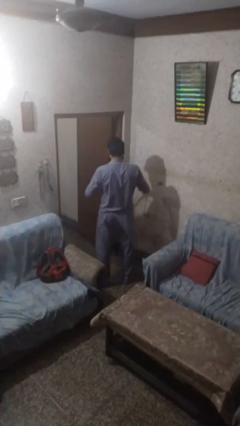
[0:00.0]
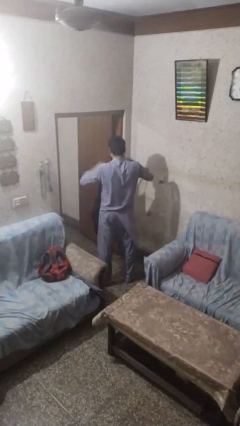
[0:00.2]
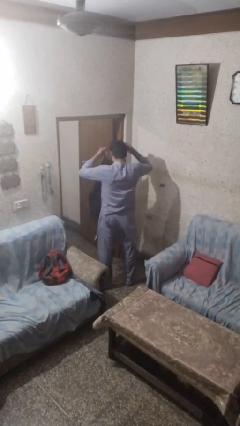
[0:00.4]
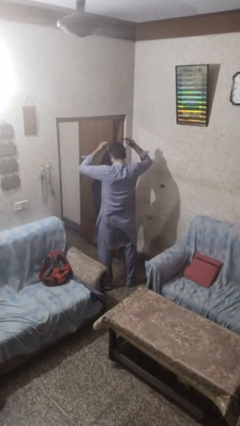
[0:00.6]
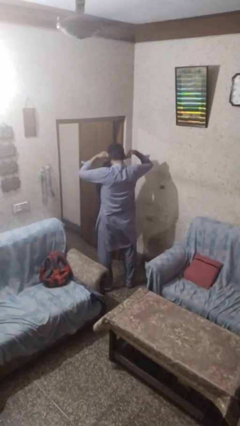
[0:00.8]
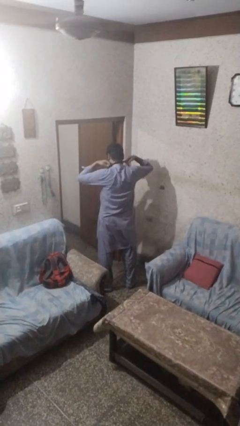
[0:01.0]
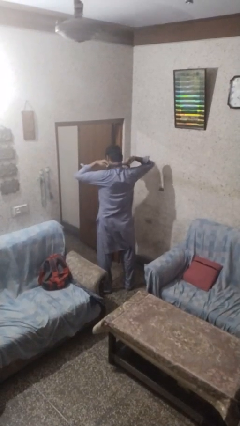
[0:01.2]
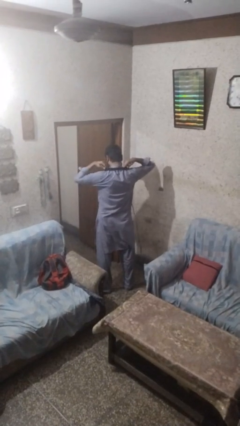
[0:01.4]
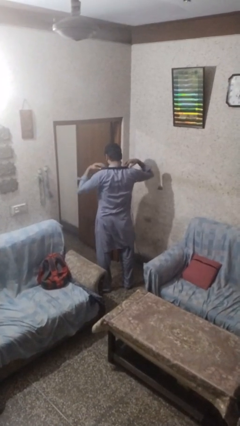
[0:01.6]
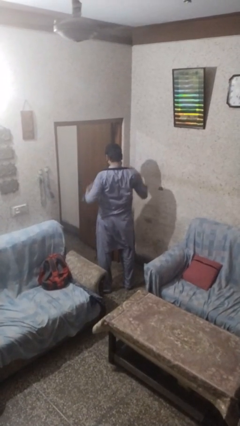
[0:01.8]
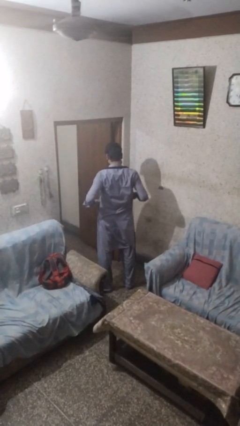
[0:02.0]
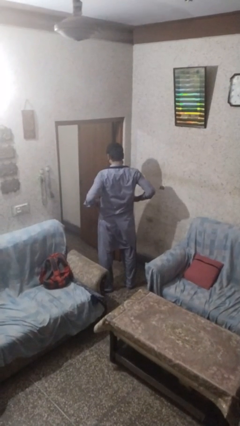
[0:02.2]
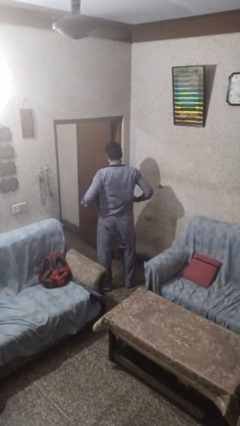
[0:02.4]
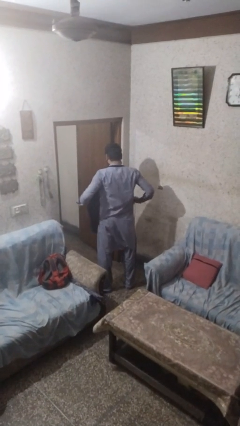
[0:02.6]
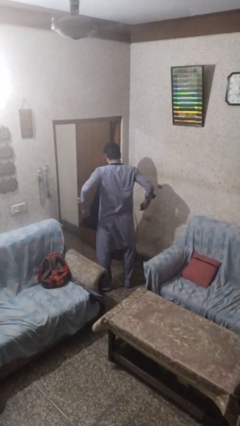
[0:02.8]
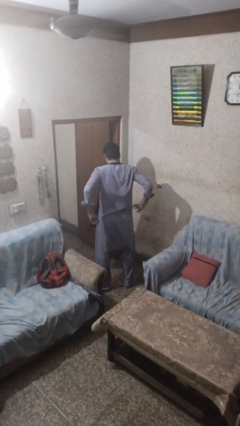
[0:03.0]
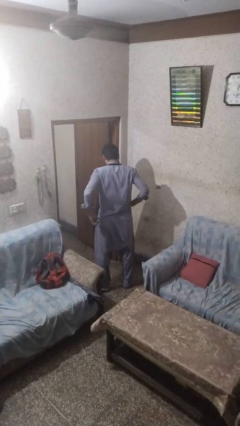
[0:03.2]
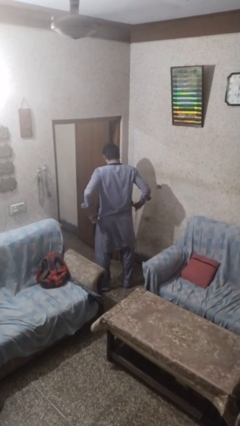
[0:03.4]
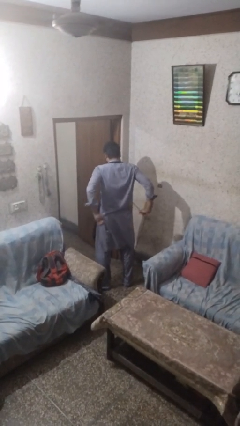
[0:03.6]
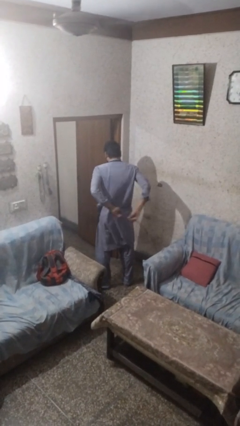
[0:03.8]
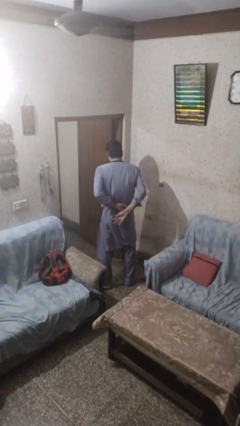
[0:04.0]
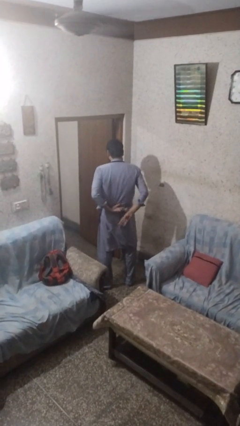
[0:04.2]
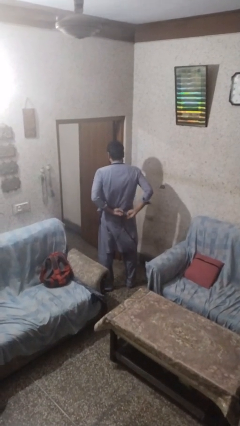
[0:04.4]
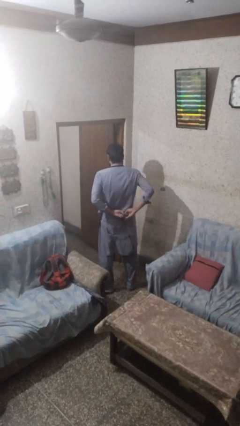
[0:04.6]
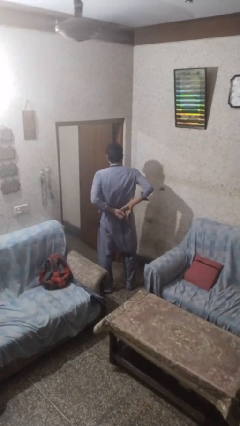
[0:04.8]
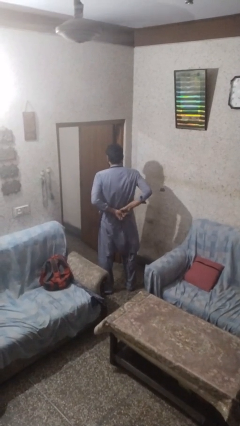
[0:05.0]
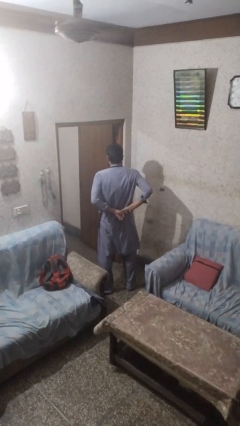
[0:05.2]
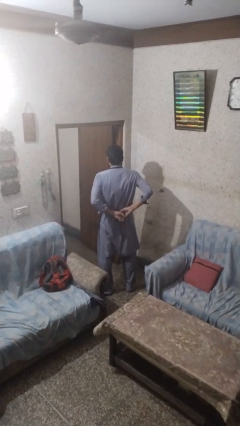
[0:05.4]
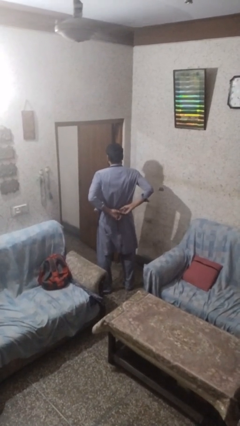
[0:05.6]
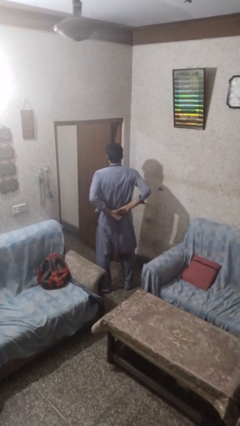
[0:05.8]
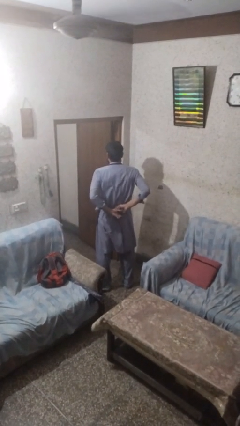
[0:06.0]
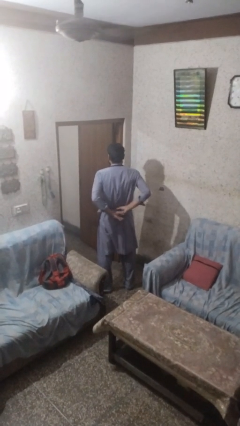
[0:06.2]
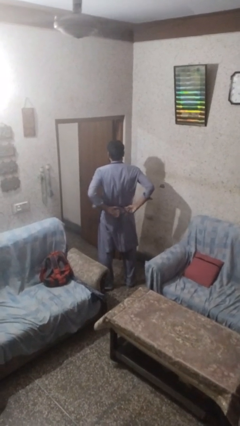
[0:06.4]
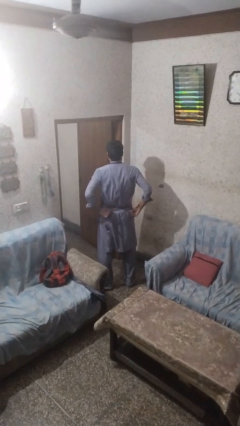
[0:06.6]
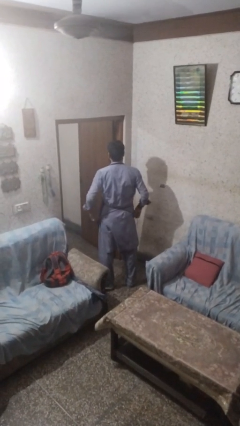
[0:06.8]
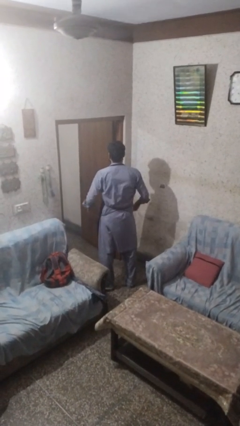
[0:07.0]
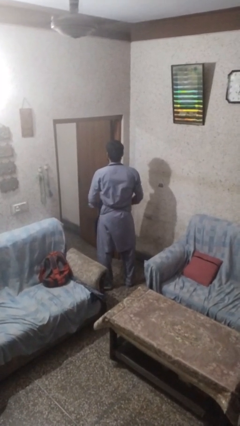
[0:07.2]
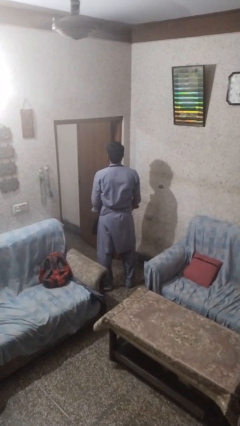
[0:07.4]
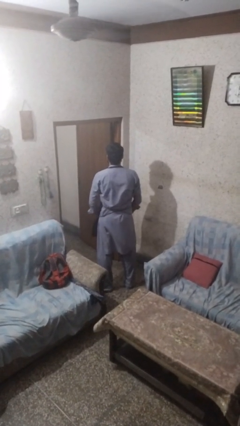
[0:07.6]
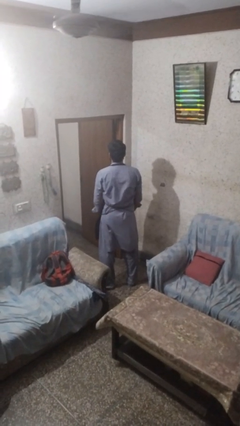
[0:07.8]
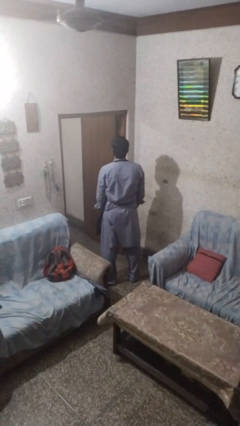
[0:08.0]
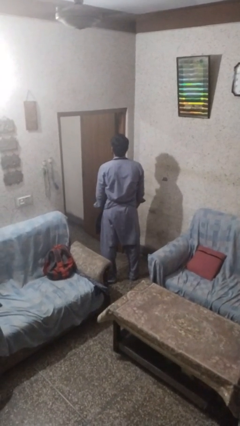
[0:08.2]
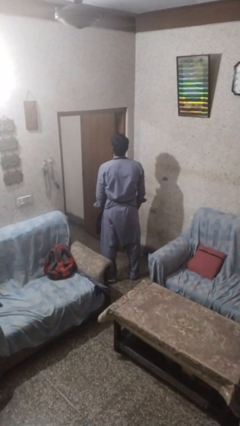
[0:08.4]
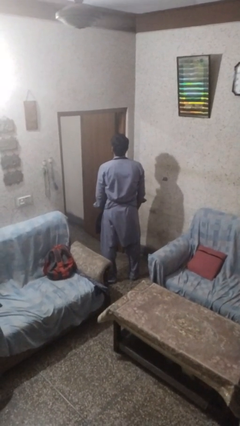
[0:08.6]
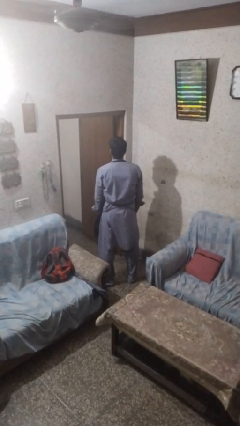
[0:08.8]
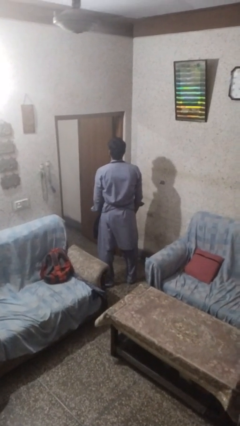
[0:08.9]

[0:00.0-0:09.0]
person puts on apron

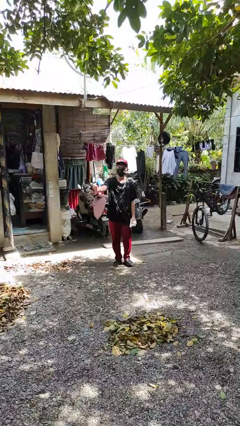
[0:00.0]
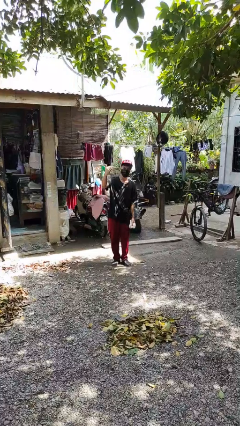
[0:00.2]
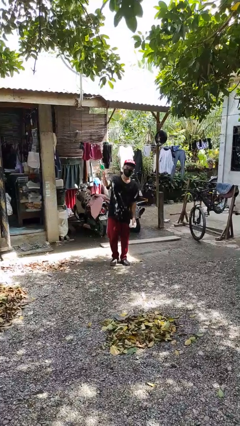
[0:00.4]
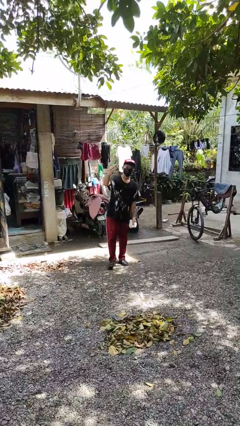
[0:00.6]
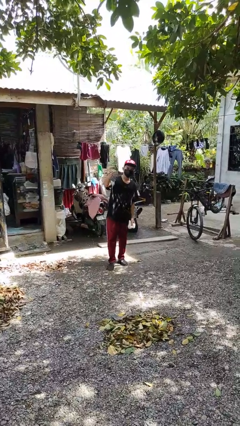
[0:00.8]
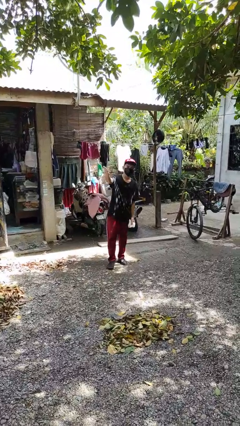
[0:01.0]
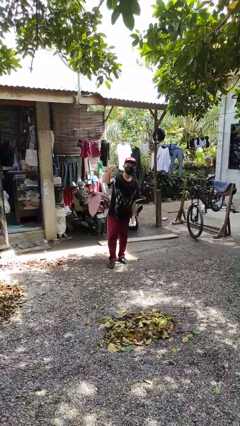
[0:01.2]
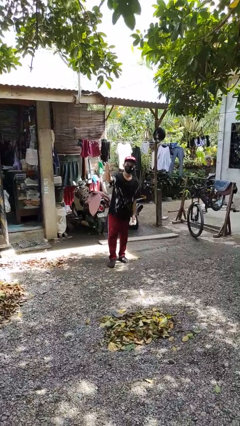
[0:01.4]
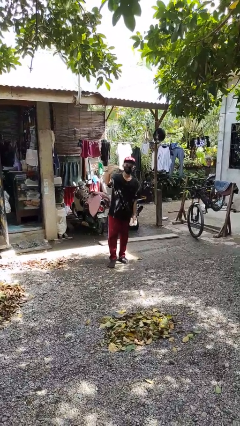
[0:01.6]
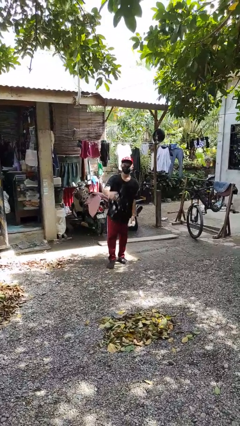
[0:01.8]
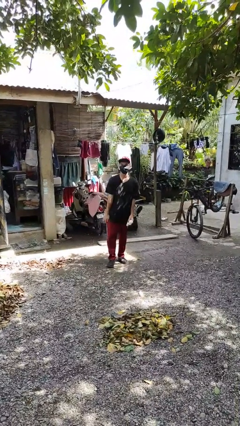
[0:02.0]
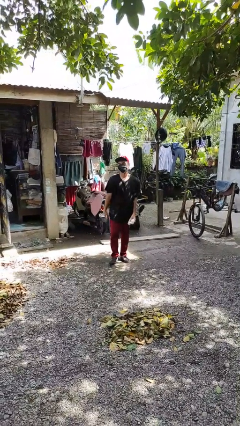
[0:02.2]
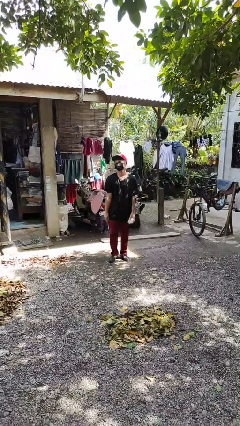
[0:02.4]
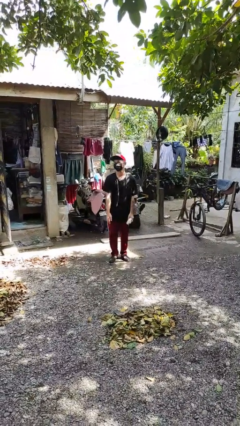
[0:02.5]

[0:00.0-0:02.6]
person gestures come here

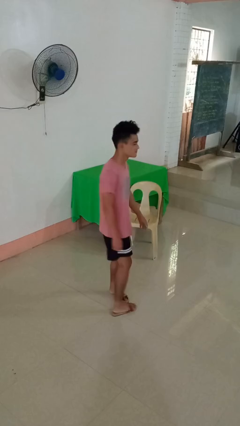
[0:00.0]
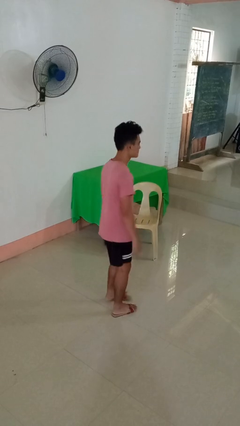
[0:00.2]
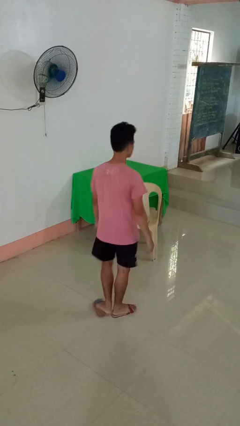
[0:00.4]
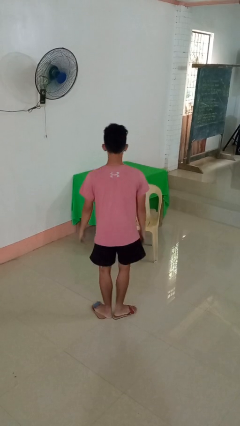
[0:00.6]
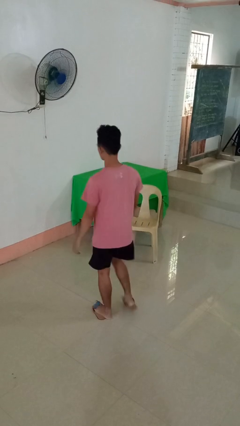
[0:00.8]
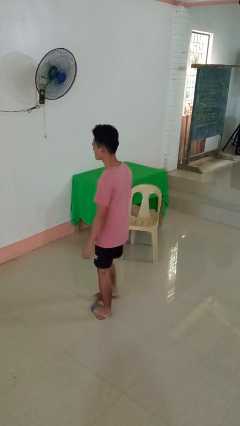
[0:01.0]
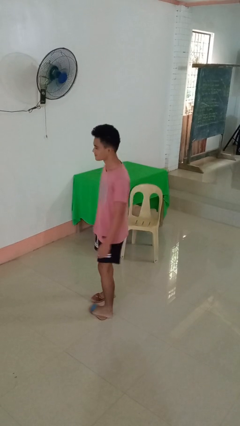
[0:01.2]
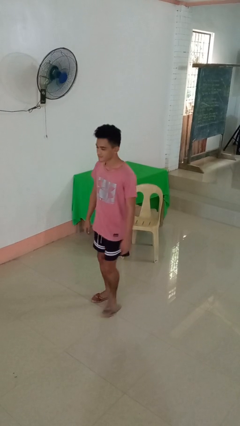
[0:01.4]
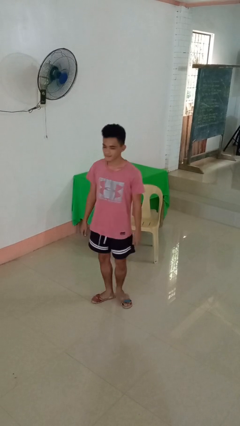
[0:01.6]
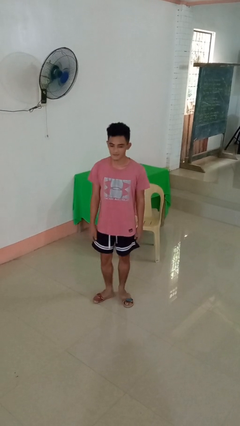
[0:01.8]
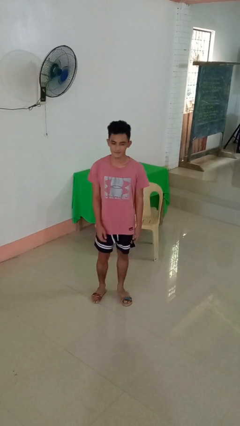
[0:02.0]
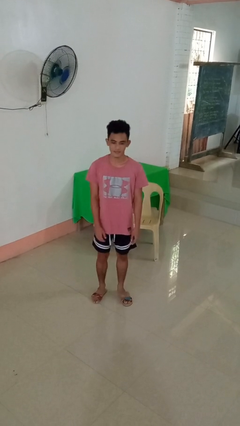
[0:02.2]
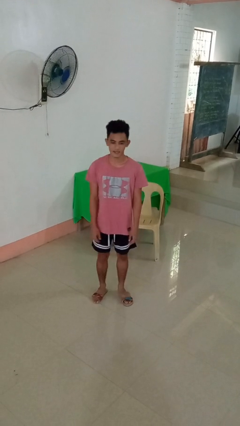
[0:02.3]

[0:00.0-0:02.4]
person twirls

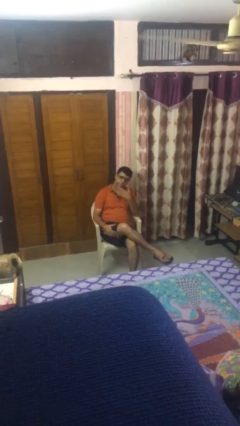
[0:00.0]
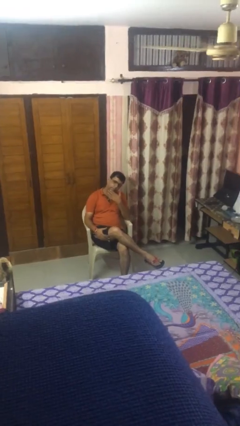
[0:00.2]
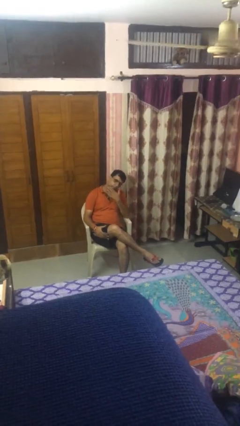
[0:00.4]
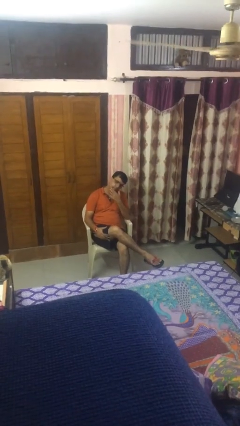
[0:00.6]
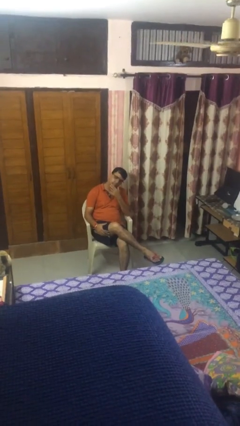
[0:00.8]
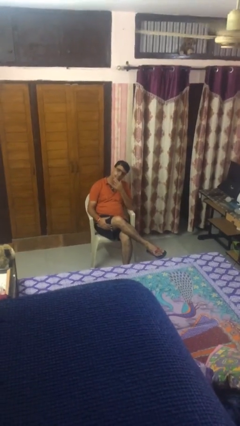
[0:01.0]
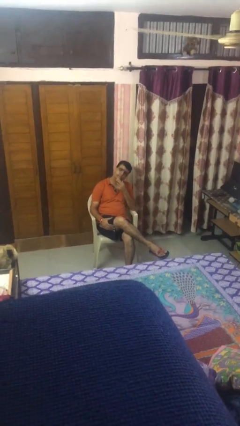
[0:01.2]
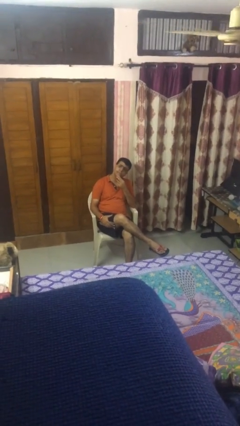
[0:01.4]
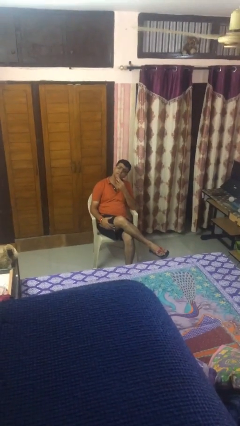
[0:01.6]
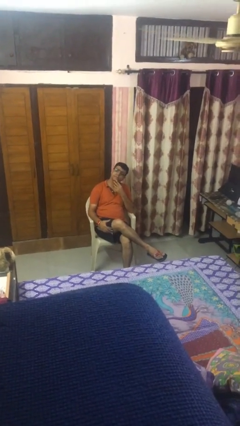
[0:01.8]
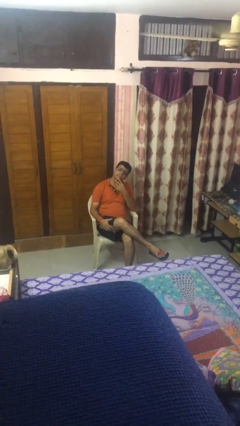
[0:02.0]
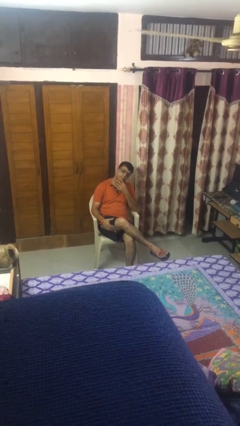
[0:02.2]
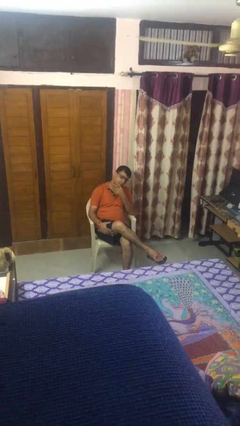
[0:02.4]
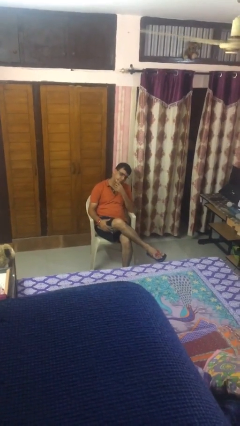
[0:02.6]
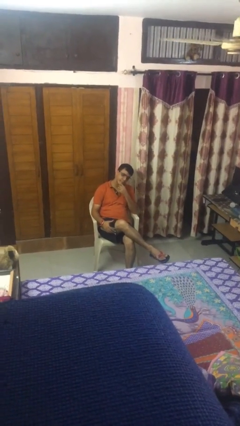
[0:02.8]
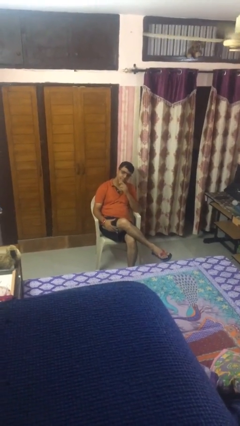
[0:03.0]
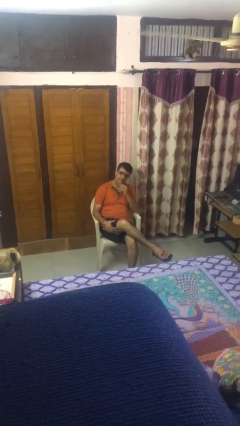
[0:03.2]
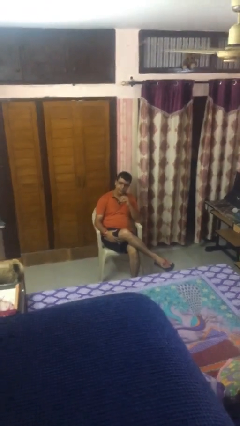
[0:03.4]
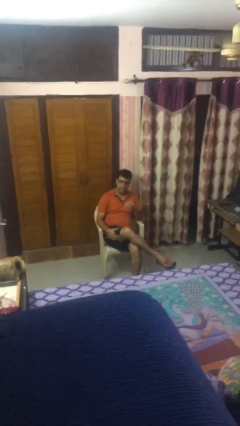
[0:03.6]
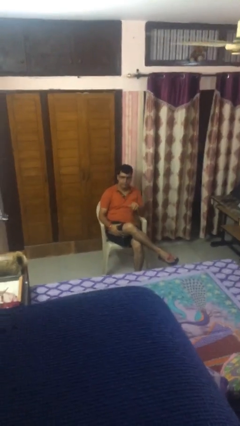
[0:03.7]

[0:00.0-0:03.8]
person strokes chin

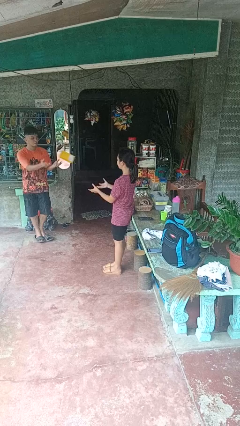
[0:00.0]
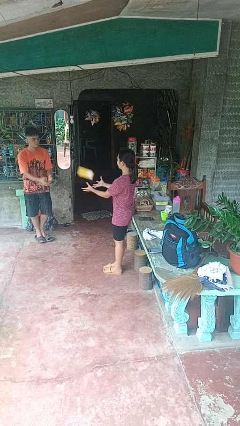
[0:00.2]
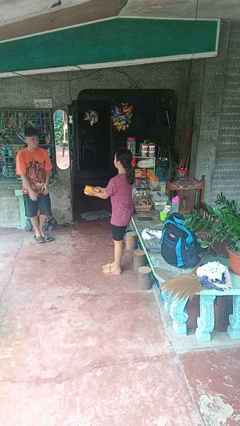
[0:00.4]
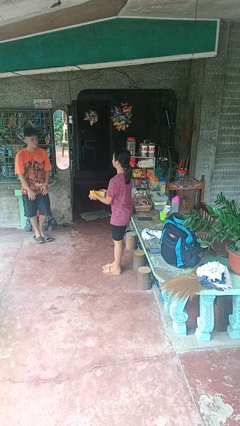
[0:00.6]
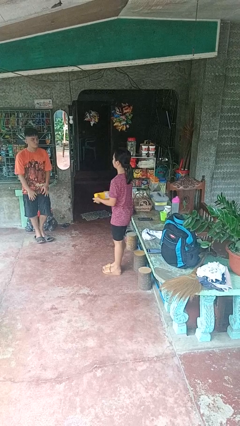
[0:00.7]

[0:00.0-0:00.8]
person catches object from person
